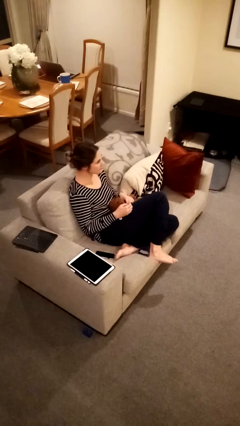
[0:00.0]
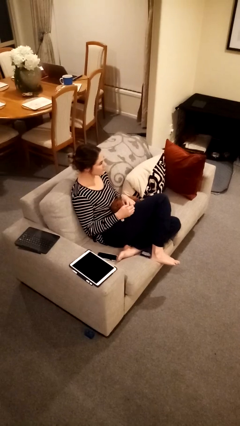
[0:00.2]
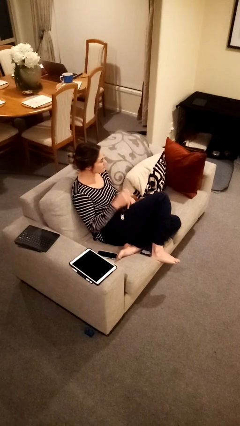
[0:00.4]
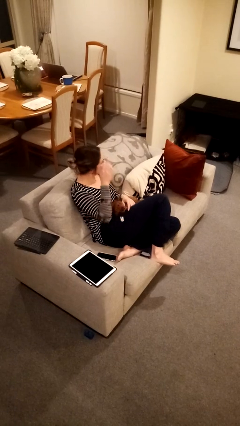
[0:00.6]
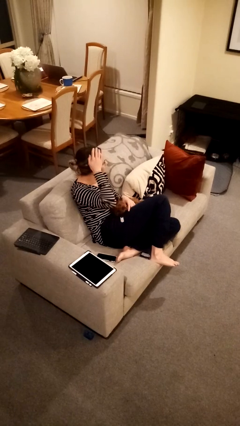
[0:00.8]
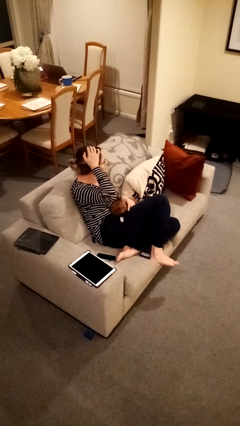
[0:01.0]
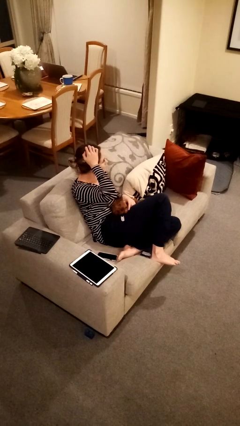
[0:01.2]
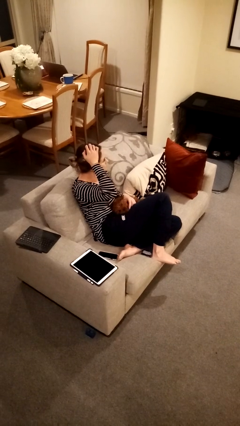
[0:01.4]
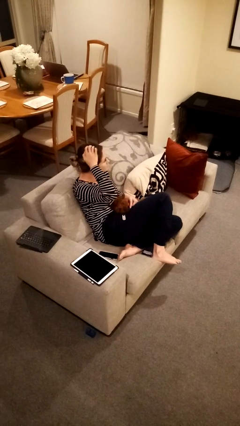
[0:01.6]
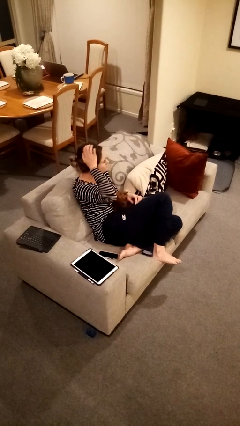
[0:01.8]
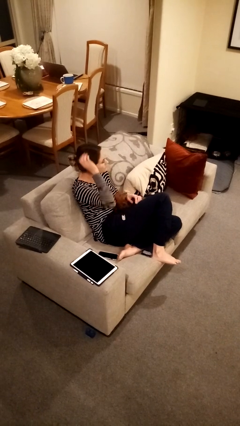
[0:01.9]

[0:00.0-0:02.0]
person scratches face

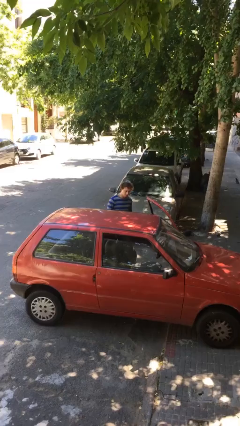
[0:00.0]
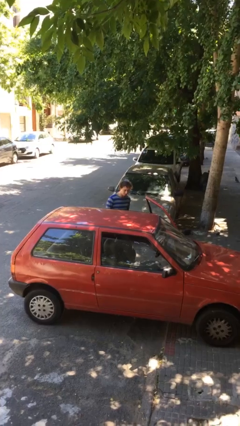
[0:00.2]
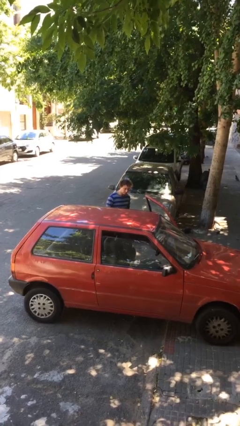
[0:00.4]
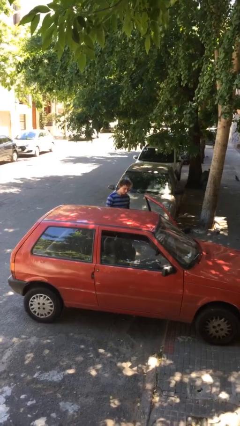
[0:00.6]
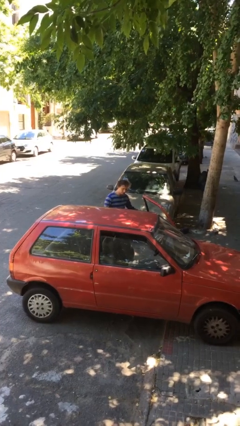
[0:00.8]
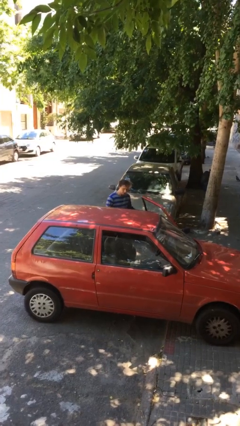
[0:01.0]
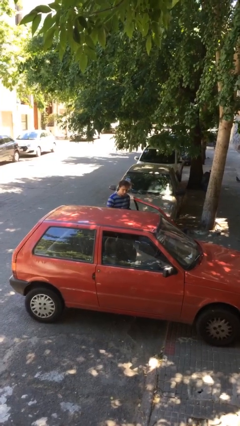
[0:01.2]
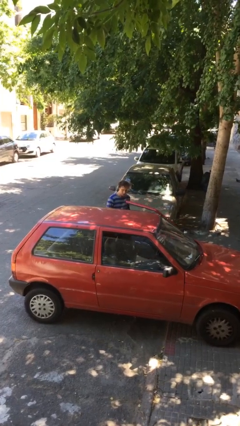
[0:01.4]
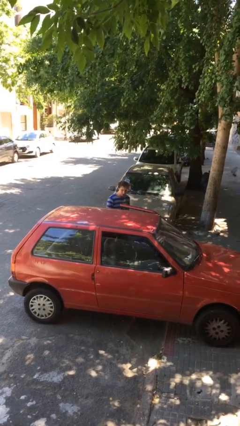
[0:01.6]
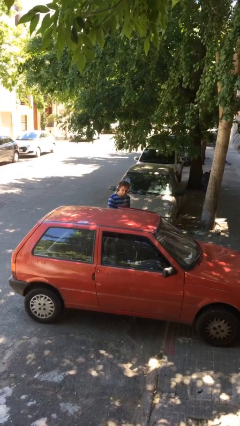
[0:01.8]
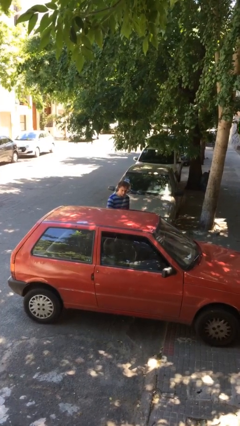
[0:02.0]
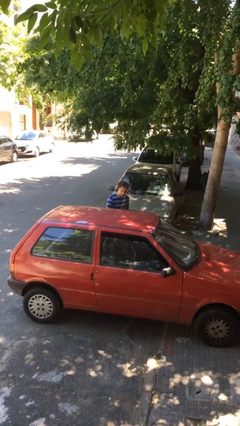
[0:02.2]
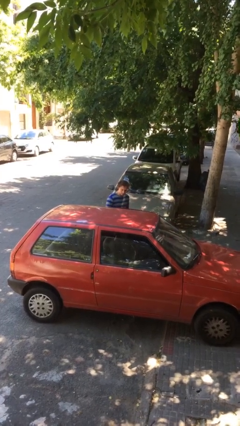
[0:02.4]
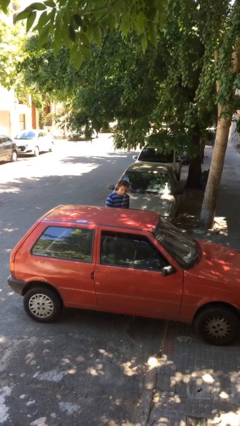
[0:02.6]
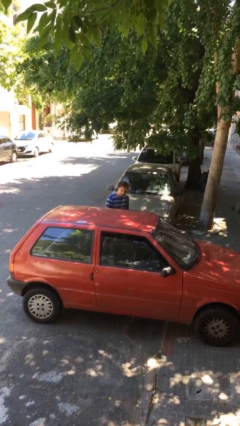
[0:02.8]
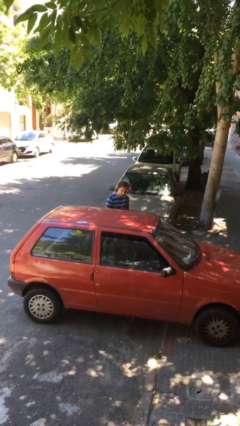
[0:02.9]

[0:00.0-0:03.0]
person closes car door

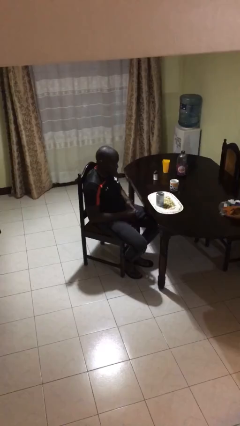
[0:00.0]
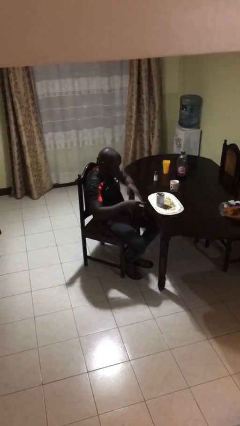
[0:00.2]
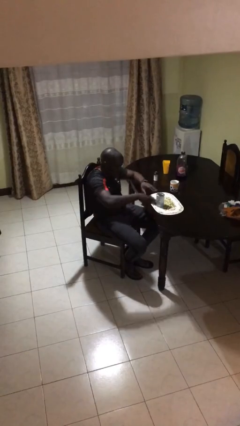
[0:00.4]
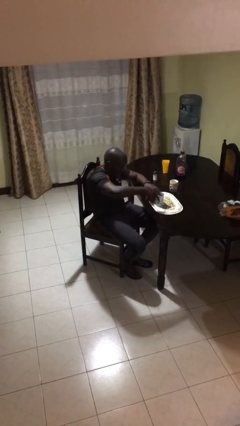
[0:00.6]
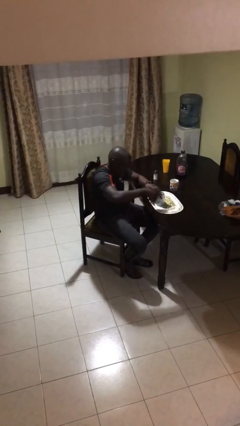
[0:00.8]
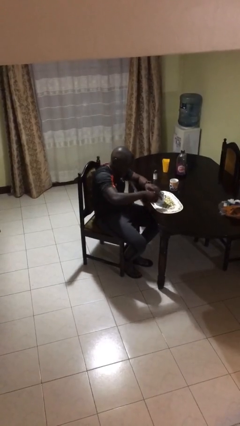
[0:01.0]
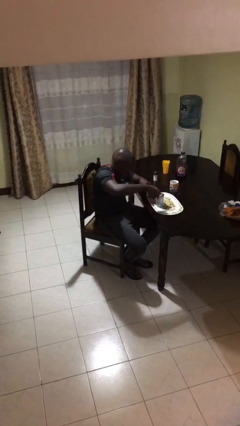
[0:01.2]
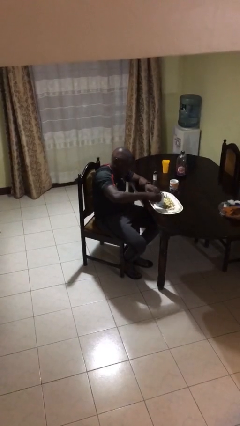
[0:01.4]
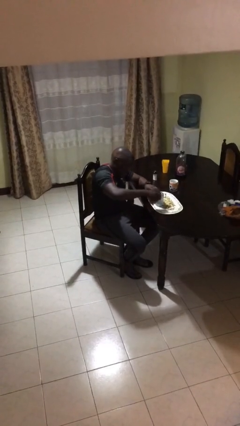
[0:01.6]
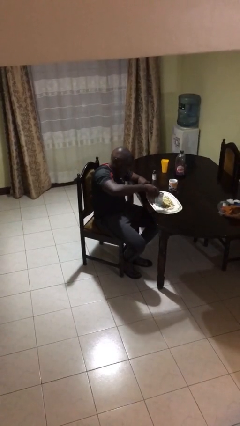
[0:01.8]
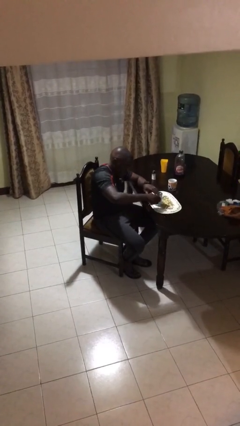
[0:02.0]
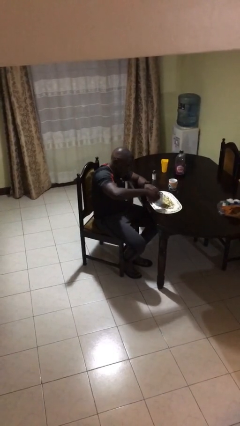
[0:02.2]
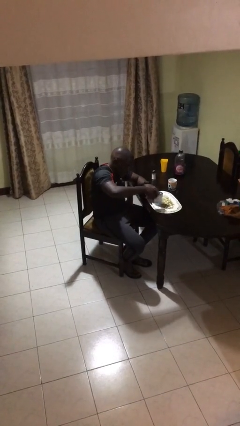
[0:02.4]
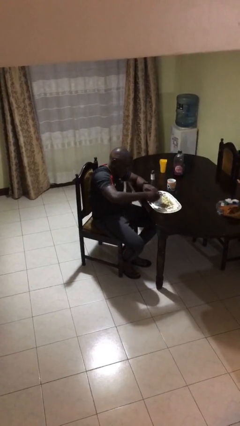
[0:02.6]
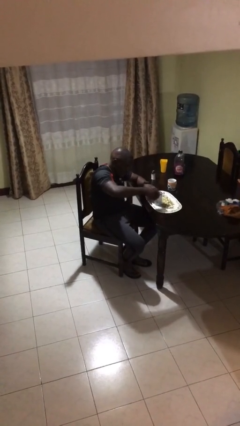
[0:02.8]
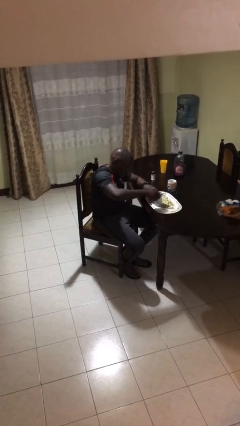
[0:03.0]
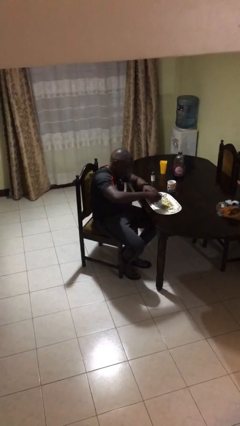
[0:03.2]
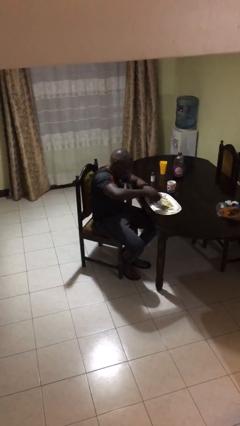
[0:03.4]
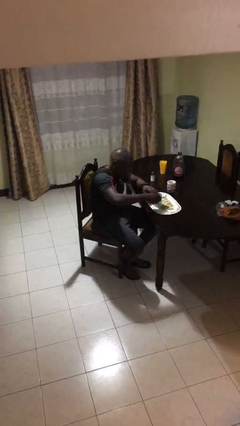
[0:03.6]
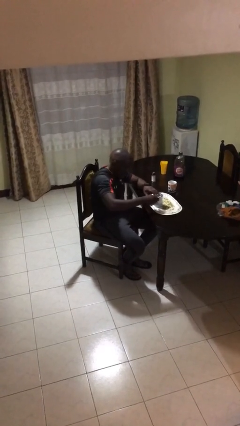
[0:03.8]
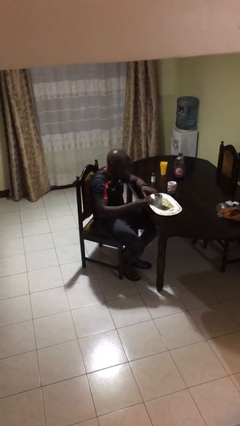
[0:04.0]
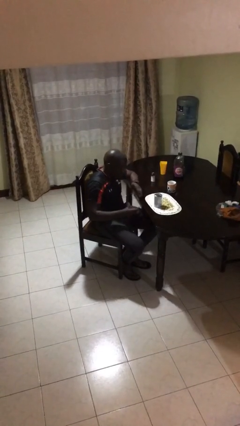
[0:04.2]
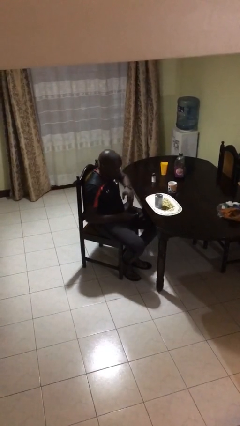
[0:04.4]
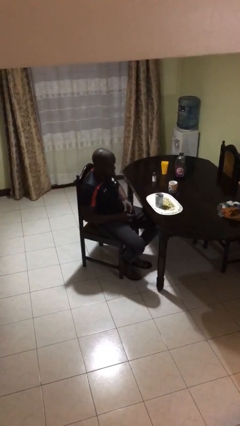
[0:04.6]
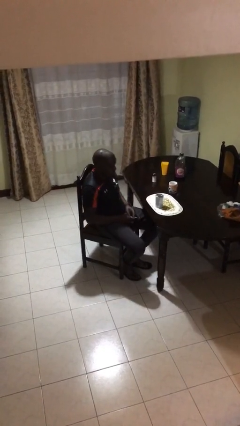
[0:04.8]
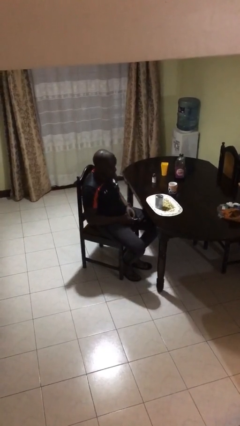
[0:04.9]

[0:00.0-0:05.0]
person opens can with can opener

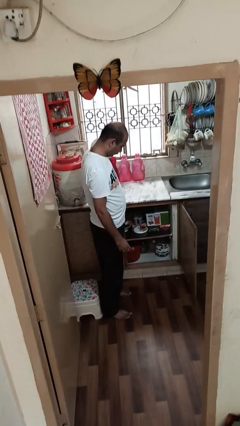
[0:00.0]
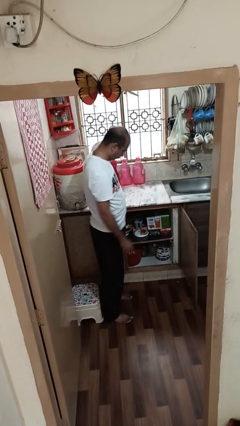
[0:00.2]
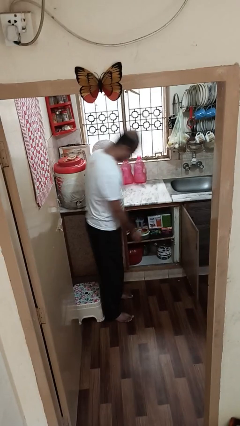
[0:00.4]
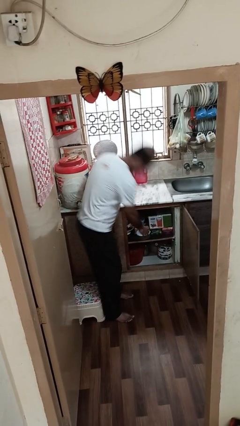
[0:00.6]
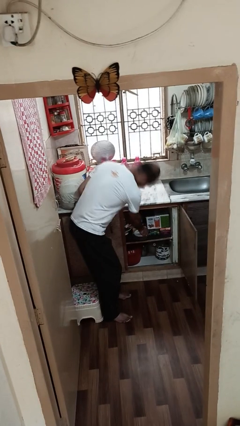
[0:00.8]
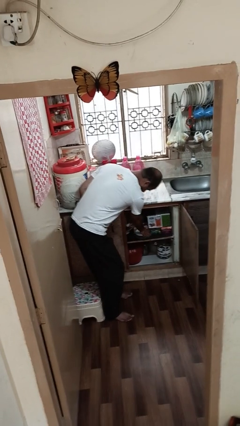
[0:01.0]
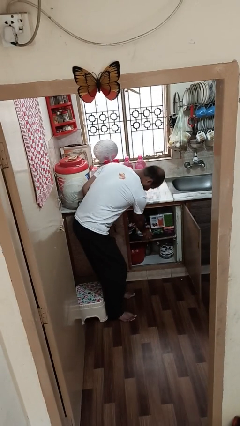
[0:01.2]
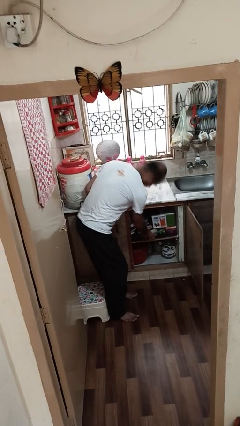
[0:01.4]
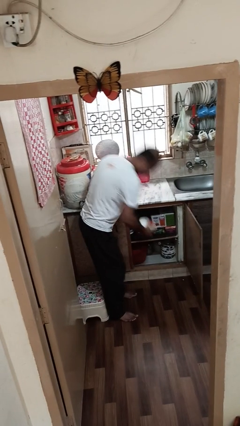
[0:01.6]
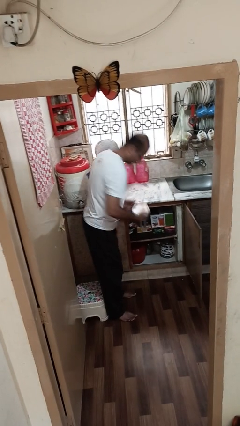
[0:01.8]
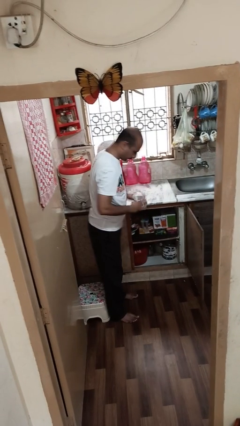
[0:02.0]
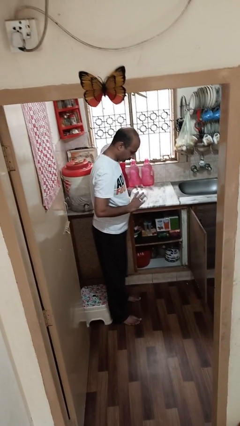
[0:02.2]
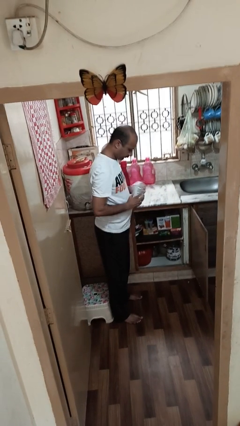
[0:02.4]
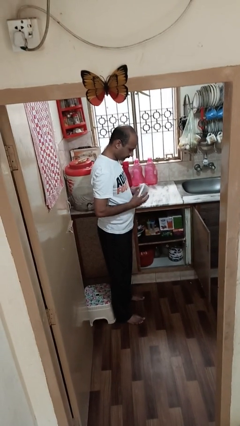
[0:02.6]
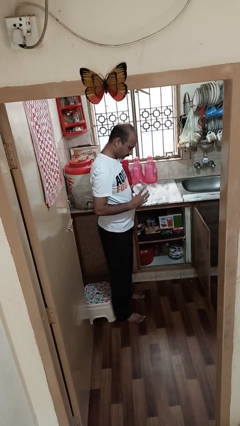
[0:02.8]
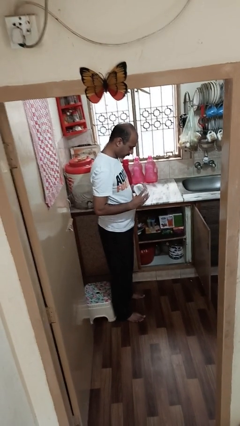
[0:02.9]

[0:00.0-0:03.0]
person picks up object from cabinet

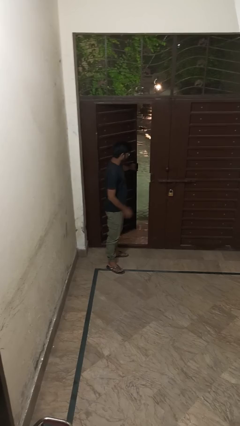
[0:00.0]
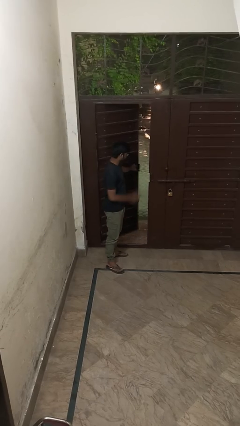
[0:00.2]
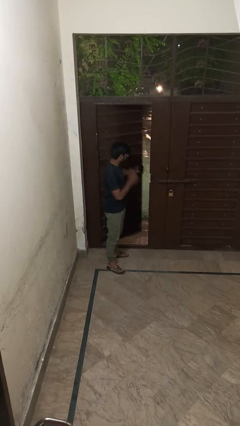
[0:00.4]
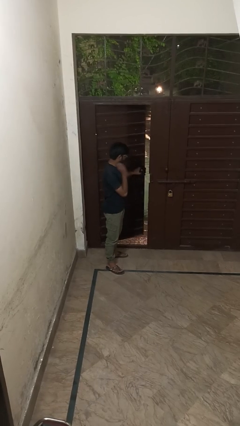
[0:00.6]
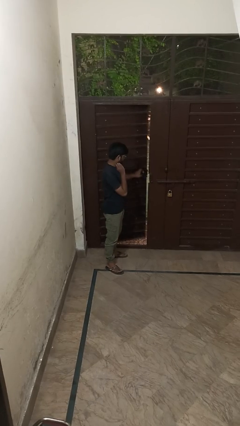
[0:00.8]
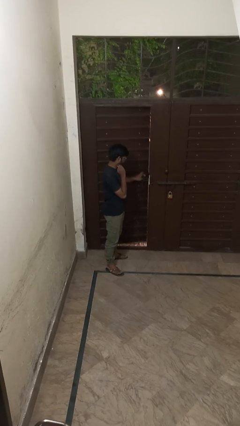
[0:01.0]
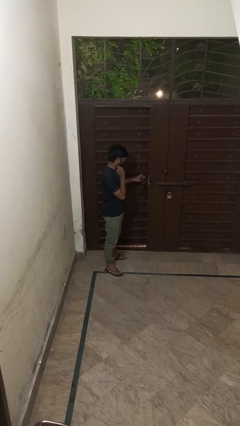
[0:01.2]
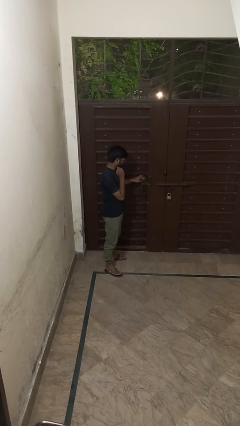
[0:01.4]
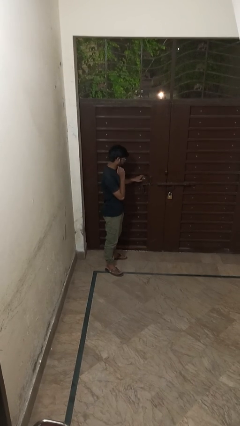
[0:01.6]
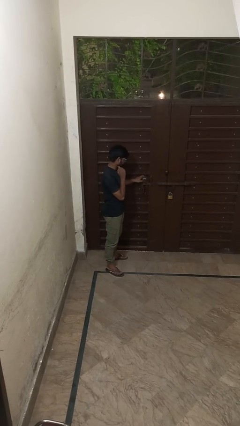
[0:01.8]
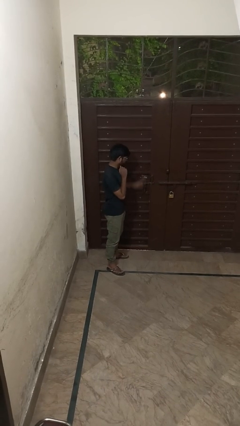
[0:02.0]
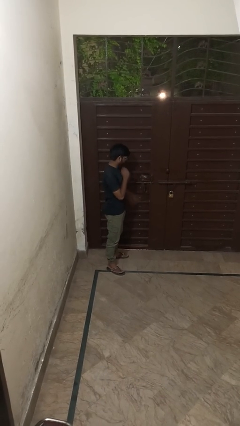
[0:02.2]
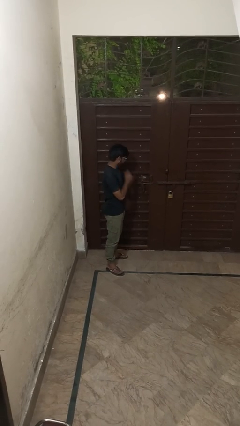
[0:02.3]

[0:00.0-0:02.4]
person closes facility door

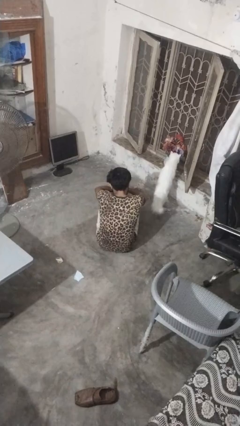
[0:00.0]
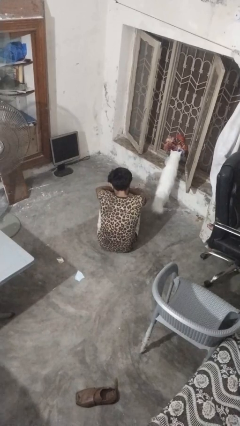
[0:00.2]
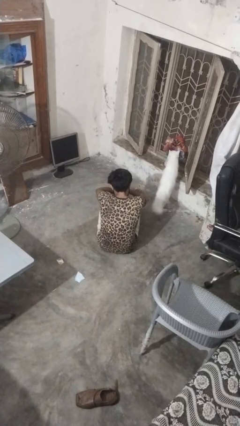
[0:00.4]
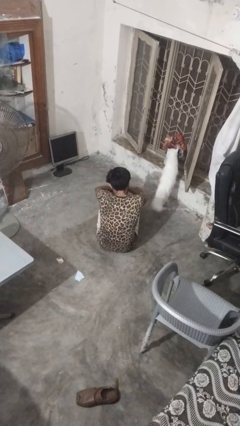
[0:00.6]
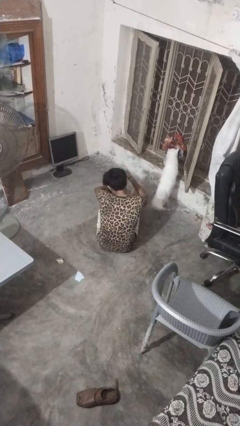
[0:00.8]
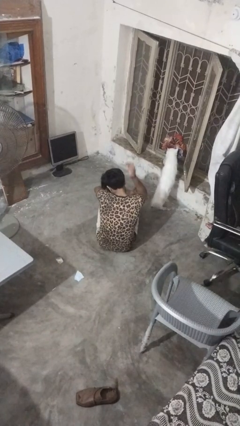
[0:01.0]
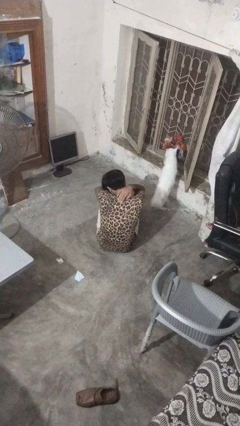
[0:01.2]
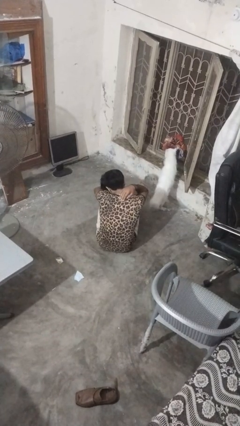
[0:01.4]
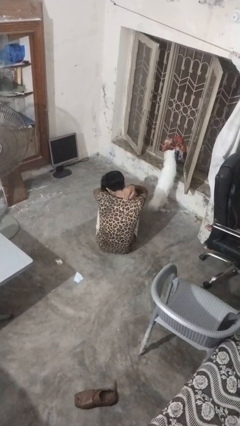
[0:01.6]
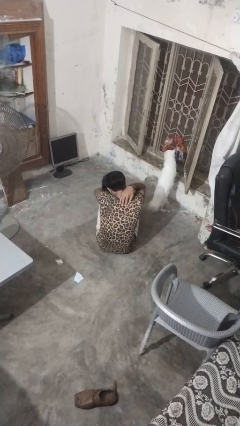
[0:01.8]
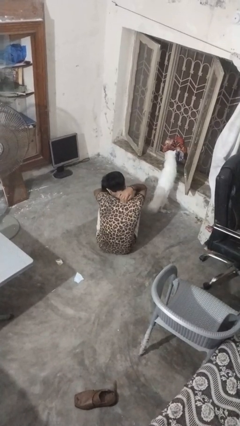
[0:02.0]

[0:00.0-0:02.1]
person swats bug
